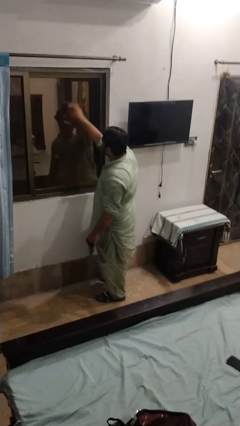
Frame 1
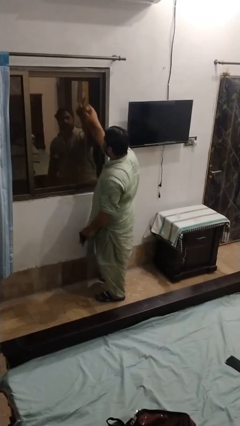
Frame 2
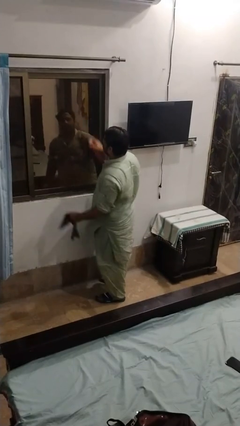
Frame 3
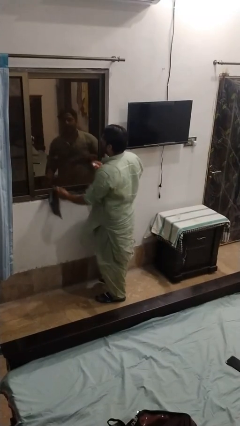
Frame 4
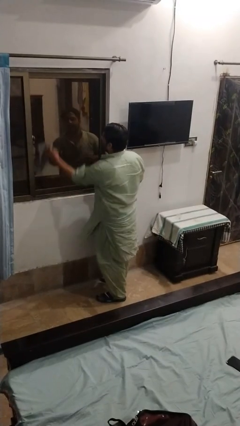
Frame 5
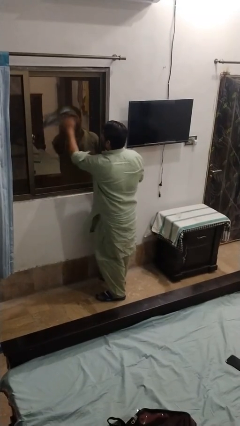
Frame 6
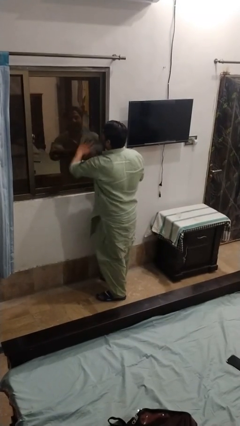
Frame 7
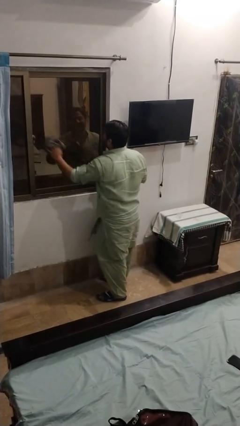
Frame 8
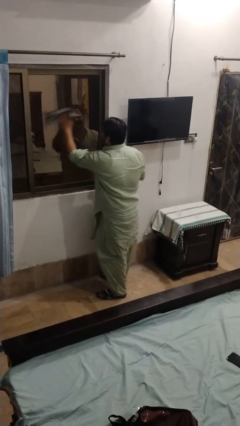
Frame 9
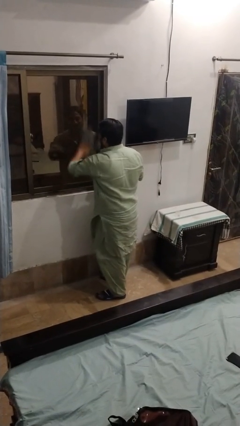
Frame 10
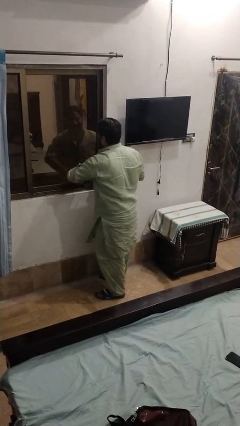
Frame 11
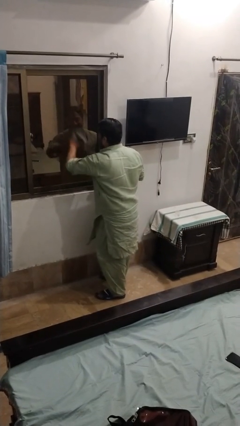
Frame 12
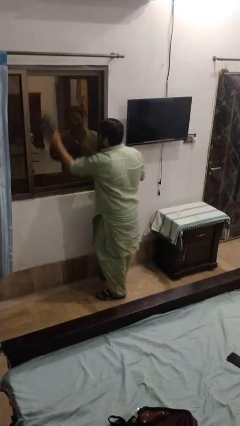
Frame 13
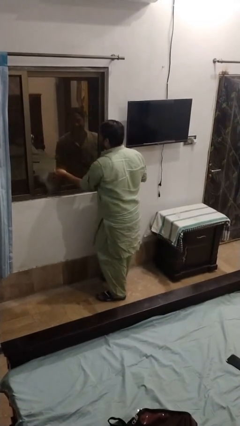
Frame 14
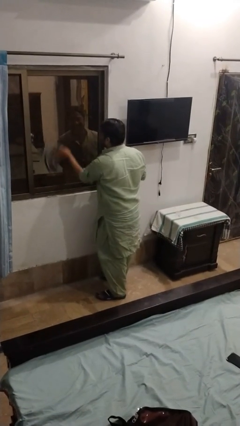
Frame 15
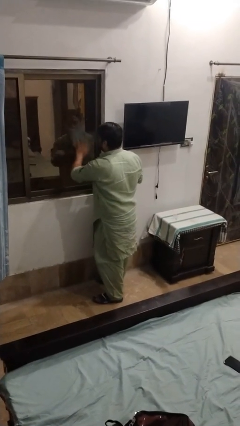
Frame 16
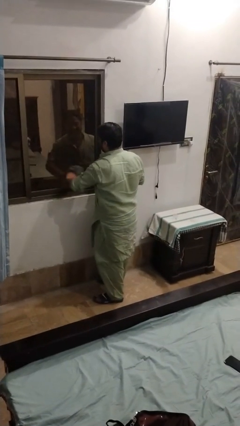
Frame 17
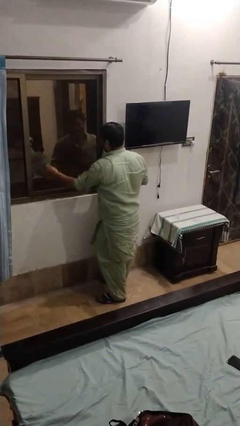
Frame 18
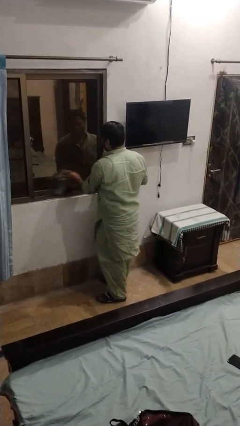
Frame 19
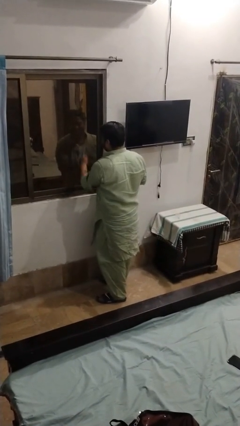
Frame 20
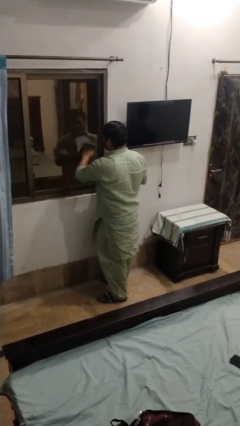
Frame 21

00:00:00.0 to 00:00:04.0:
person washes window

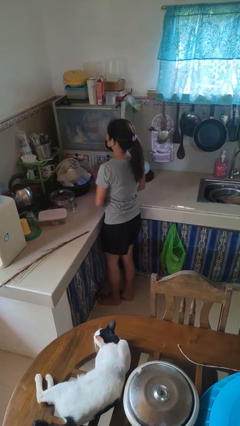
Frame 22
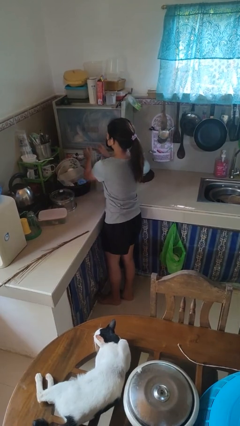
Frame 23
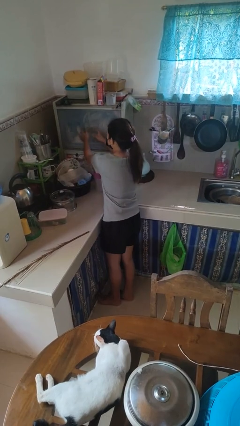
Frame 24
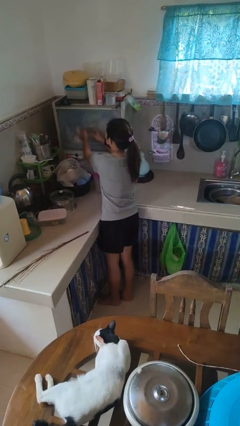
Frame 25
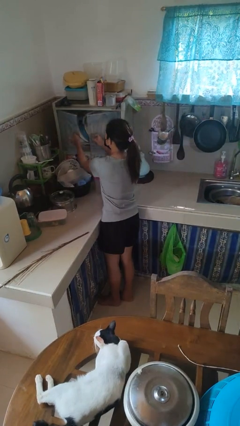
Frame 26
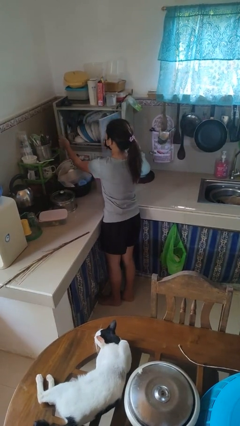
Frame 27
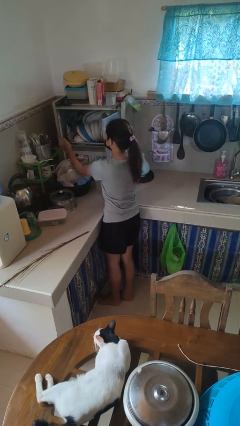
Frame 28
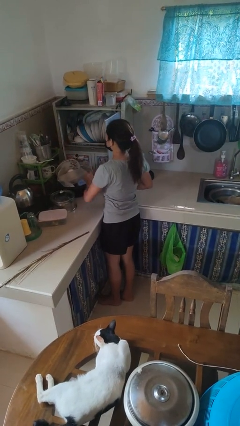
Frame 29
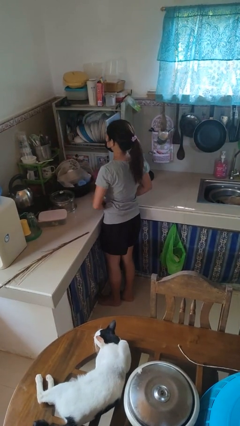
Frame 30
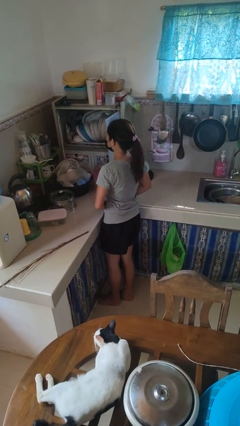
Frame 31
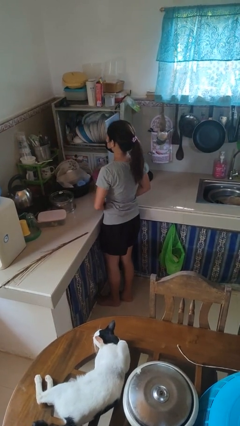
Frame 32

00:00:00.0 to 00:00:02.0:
person opens kitchen drawer

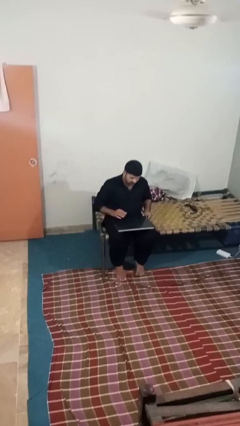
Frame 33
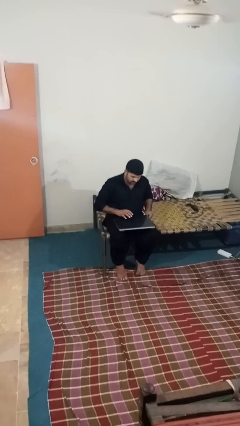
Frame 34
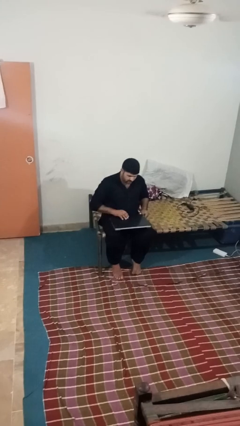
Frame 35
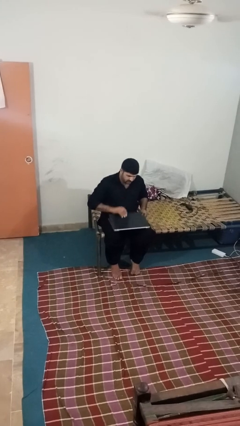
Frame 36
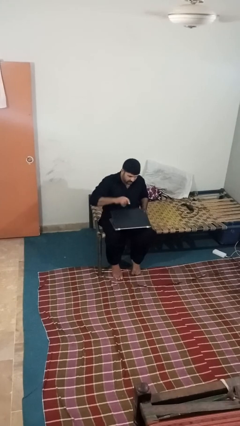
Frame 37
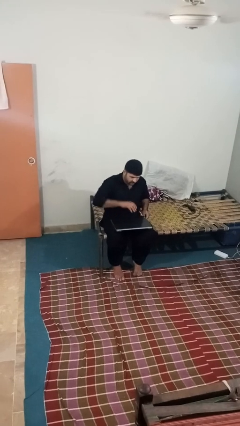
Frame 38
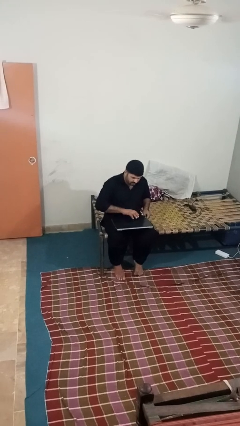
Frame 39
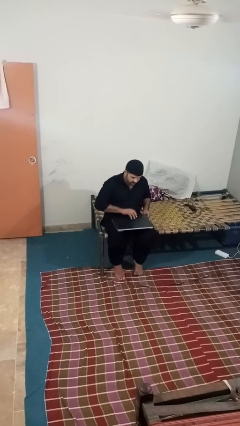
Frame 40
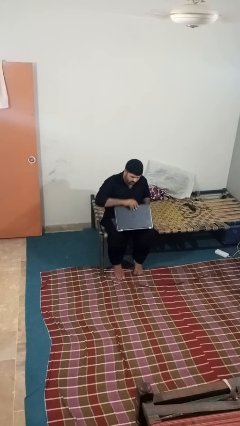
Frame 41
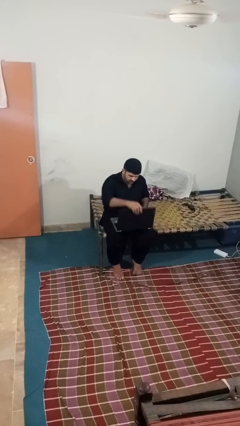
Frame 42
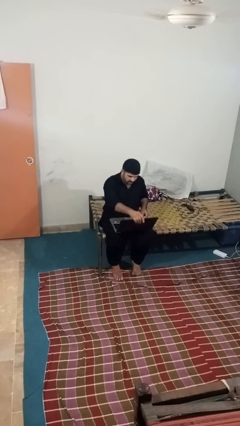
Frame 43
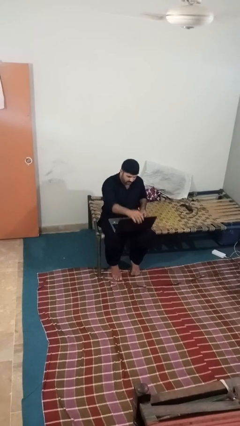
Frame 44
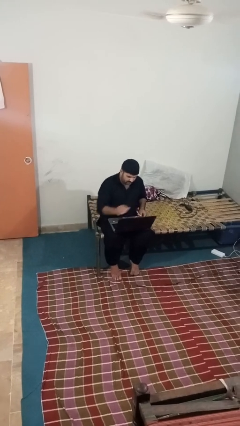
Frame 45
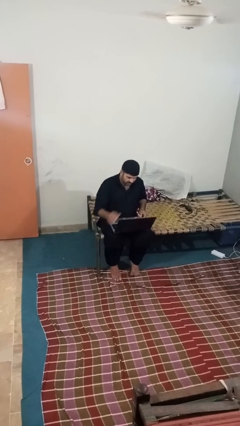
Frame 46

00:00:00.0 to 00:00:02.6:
person opens laptop

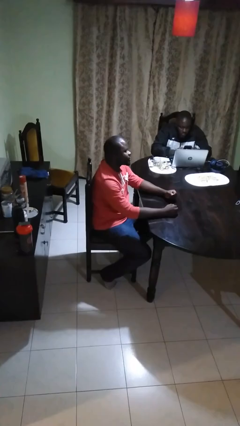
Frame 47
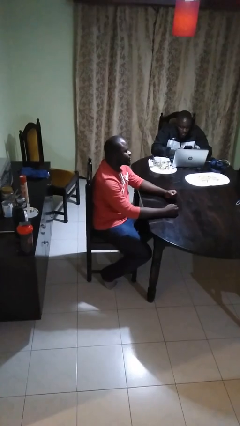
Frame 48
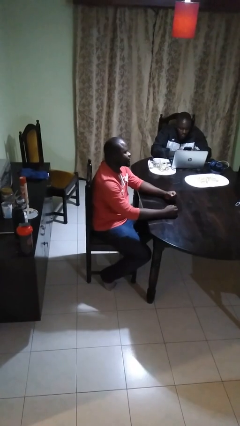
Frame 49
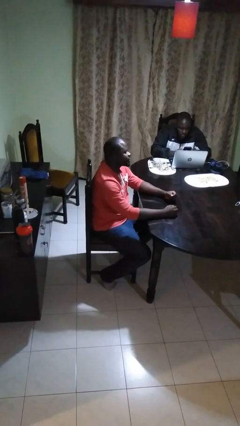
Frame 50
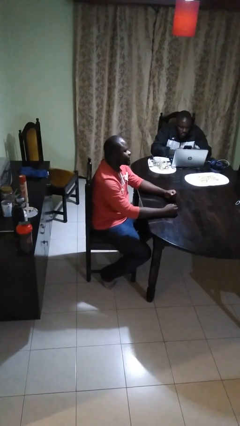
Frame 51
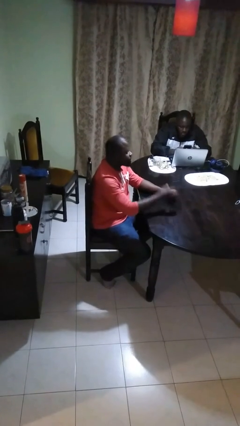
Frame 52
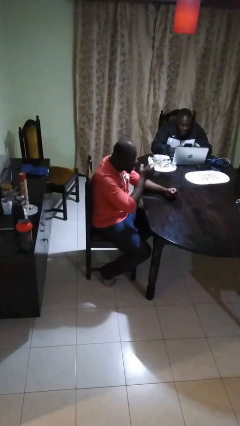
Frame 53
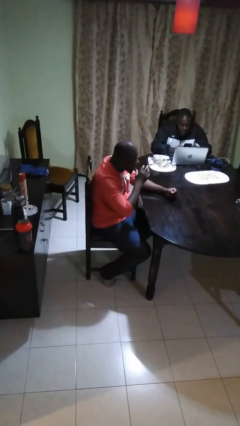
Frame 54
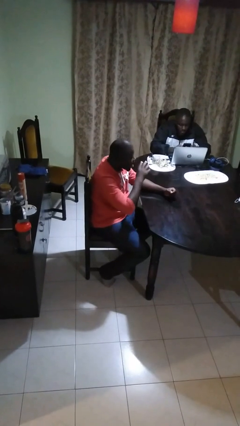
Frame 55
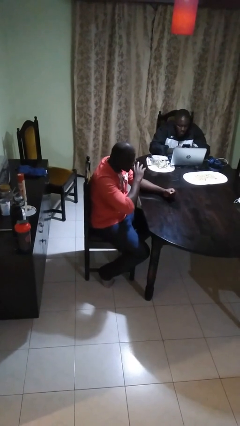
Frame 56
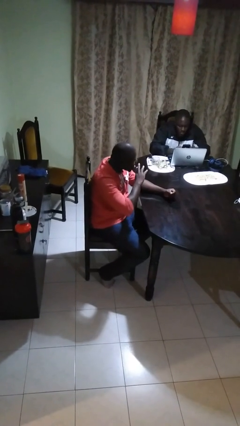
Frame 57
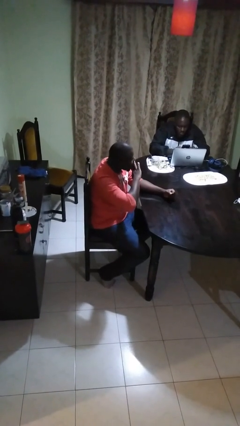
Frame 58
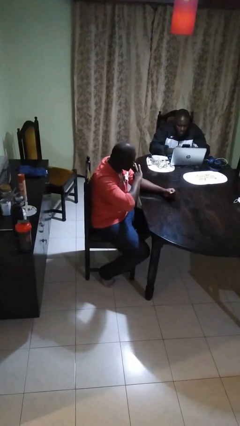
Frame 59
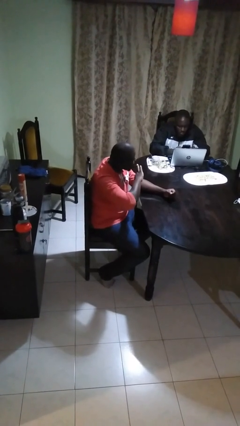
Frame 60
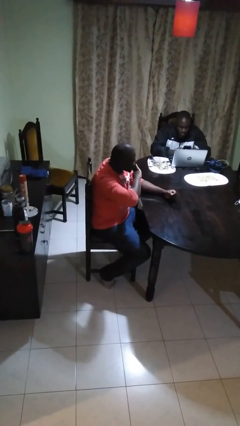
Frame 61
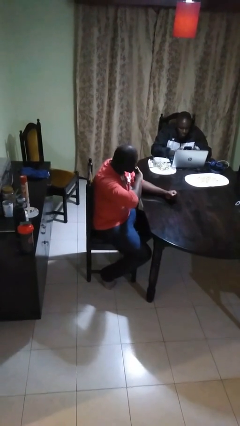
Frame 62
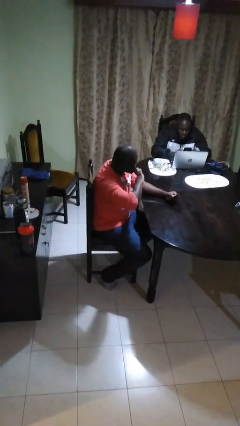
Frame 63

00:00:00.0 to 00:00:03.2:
person licks fingers

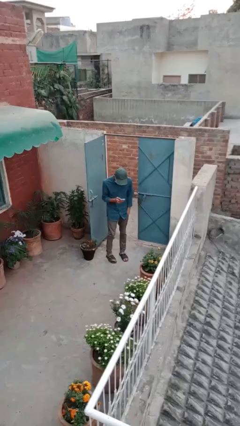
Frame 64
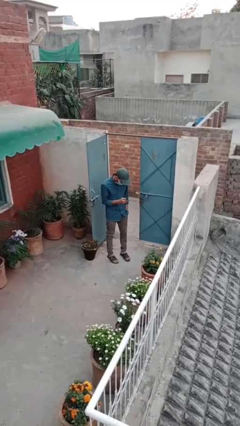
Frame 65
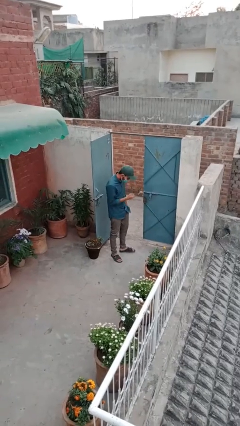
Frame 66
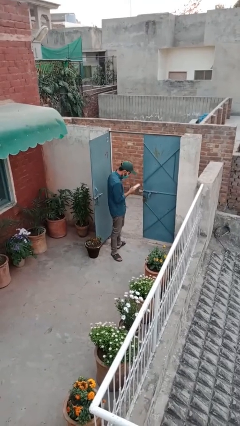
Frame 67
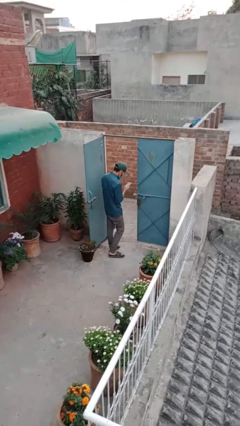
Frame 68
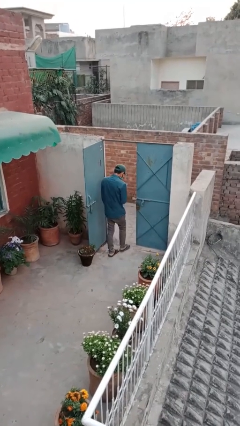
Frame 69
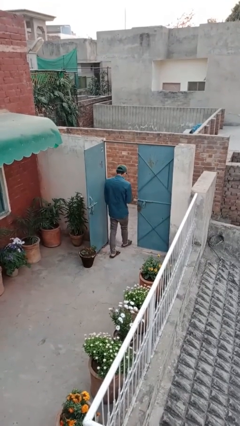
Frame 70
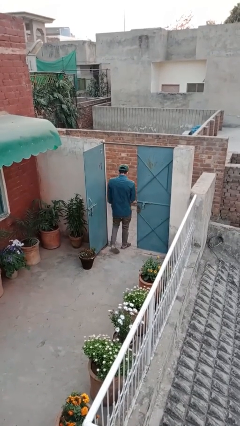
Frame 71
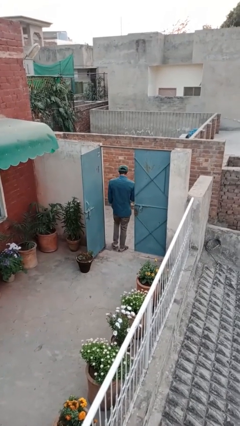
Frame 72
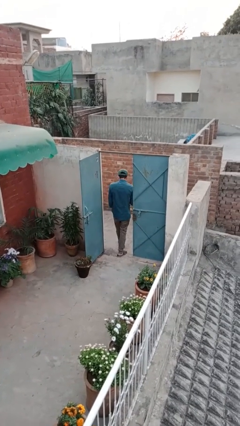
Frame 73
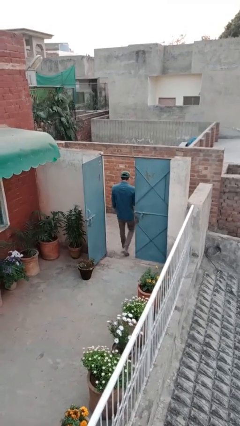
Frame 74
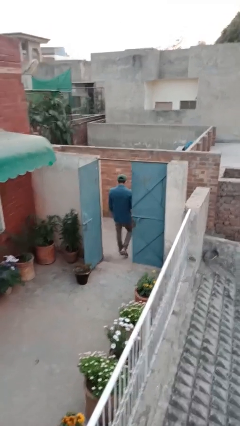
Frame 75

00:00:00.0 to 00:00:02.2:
person exits scene through structure

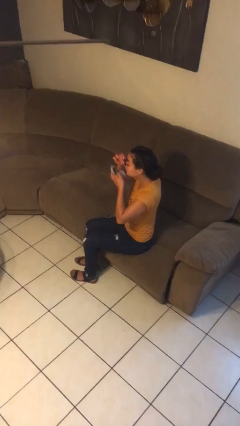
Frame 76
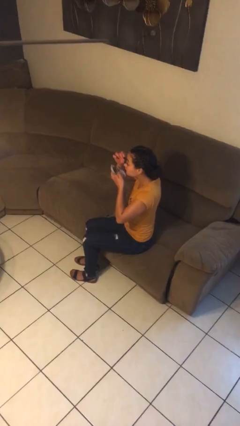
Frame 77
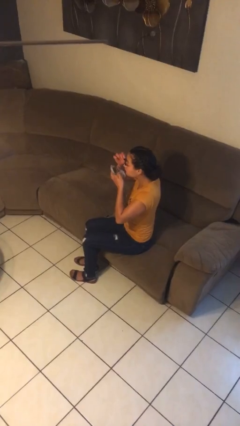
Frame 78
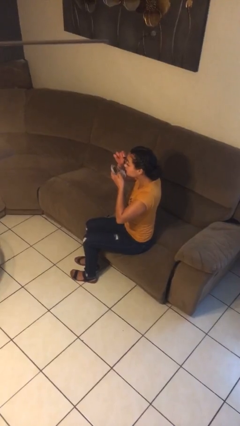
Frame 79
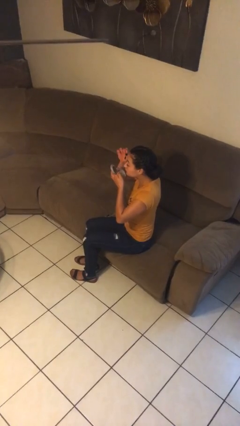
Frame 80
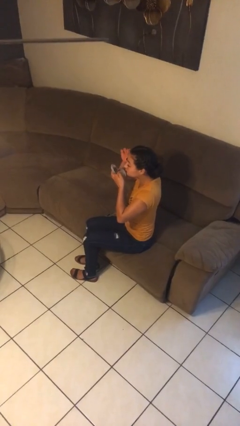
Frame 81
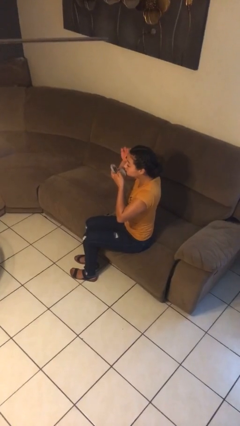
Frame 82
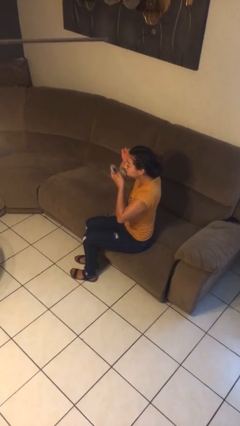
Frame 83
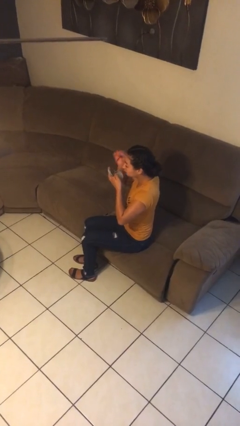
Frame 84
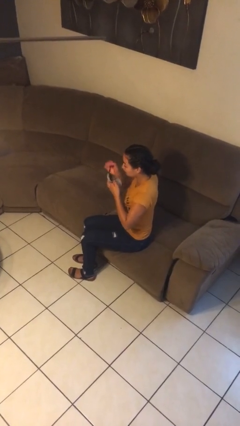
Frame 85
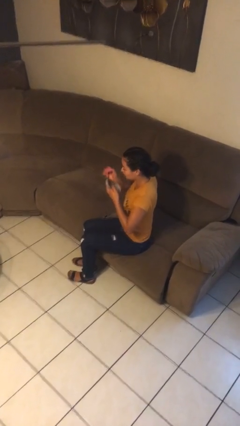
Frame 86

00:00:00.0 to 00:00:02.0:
person applies eye makeup

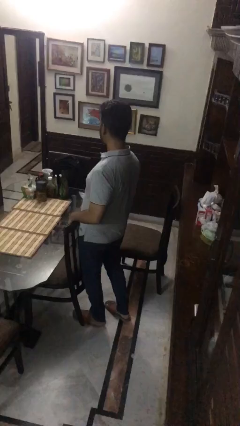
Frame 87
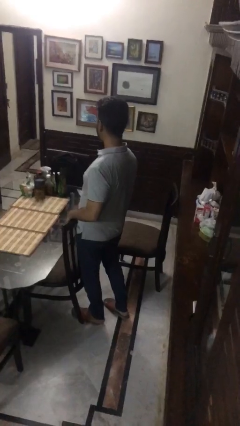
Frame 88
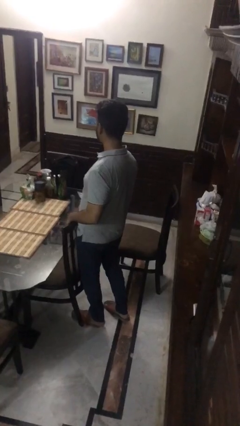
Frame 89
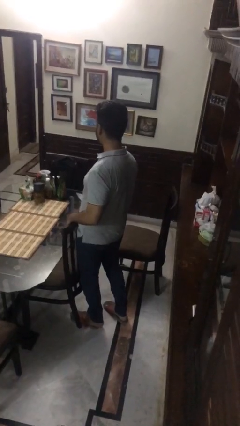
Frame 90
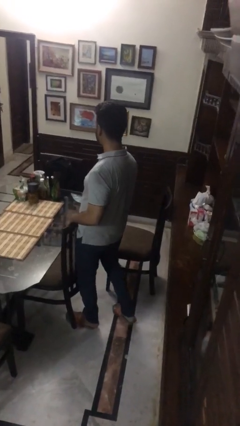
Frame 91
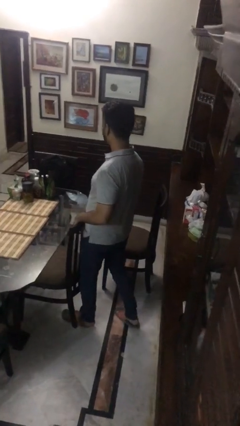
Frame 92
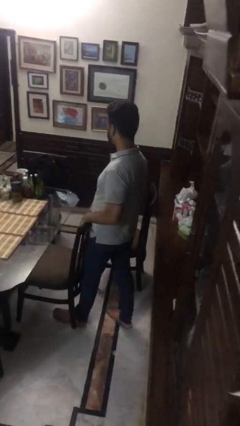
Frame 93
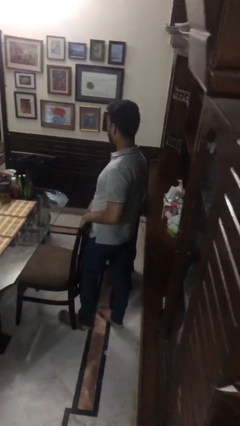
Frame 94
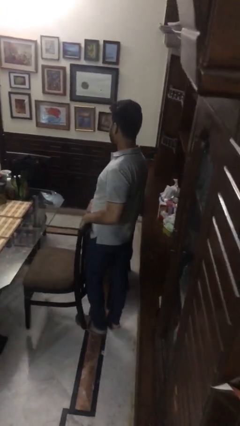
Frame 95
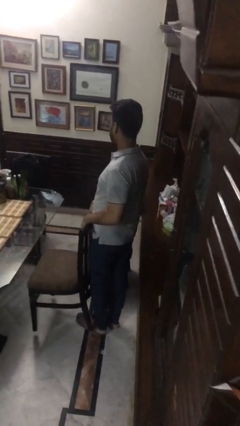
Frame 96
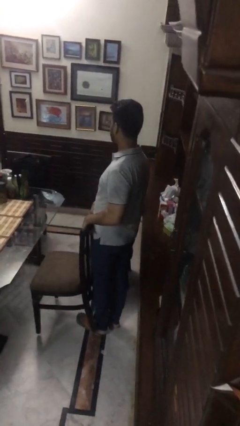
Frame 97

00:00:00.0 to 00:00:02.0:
person pulls out chair
